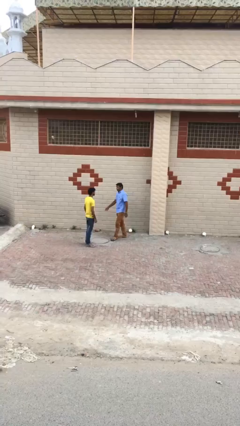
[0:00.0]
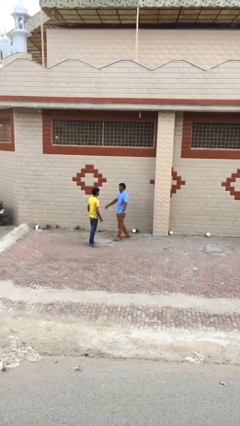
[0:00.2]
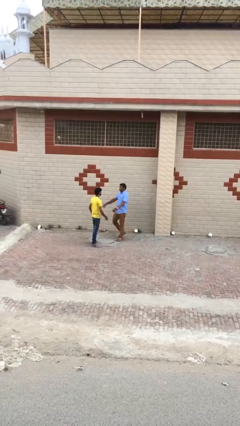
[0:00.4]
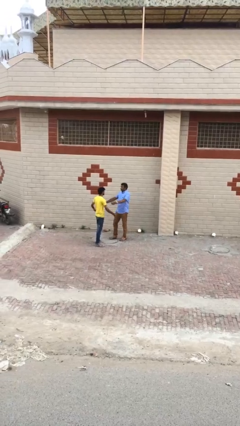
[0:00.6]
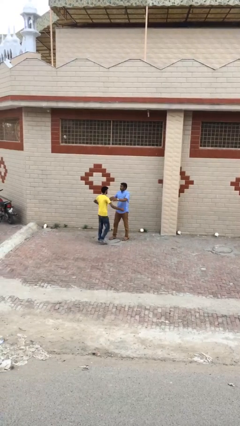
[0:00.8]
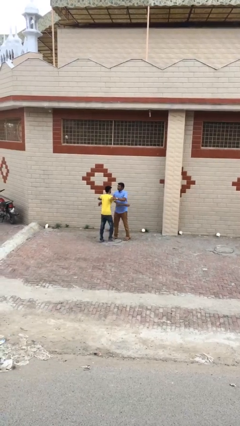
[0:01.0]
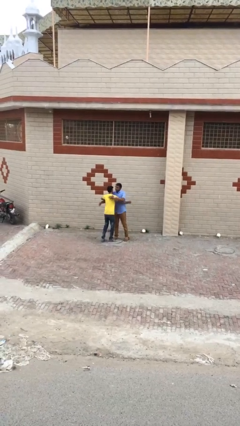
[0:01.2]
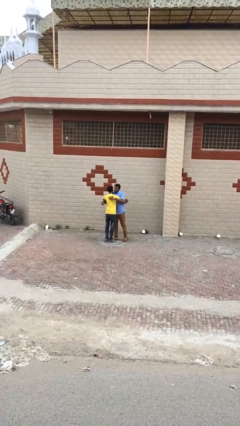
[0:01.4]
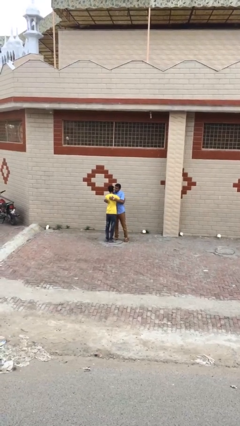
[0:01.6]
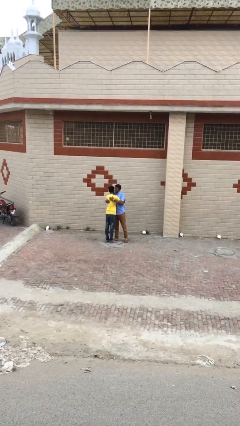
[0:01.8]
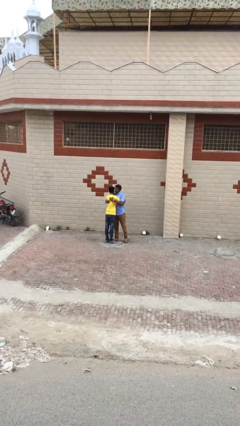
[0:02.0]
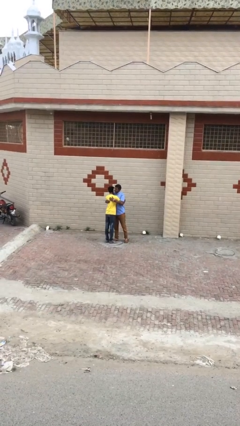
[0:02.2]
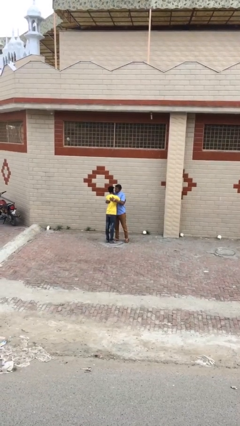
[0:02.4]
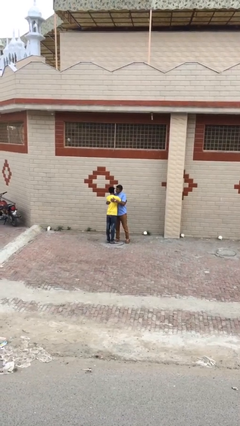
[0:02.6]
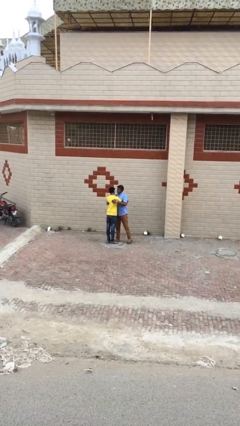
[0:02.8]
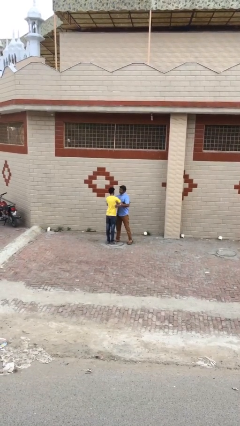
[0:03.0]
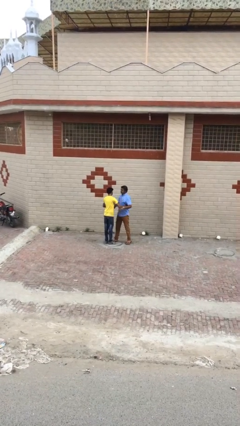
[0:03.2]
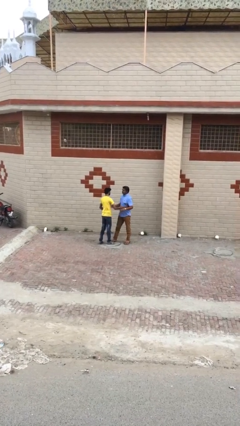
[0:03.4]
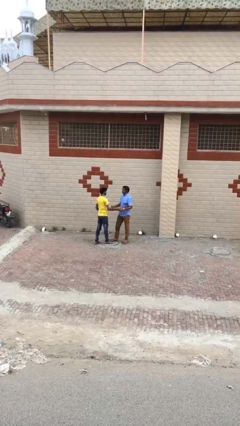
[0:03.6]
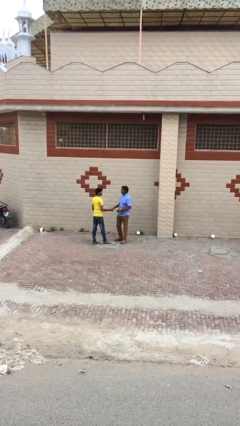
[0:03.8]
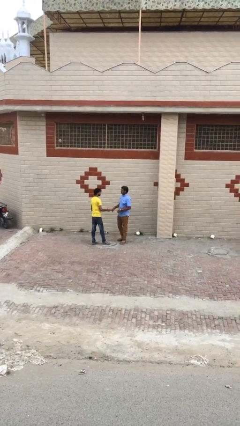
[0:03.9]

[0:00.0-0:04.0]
person embraces person

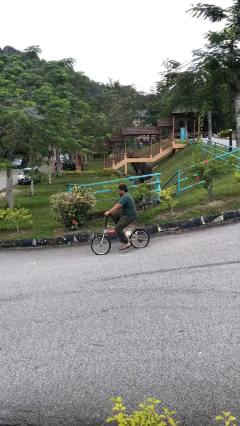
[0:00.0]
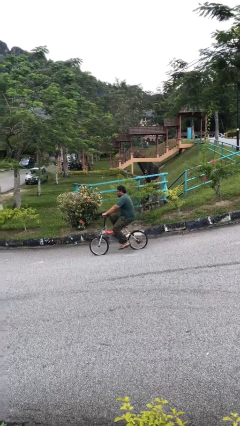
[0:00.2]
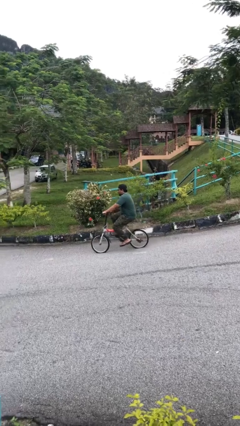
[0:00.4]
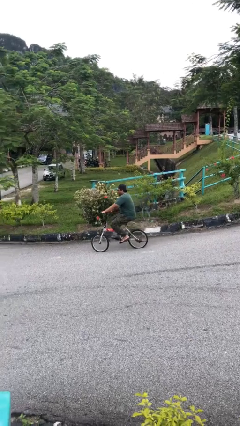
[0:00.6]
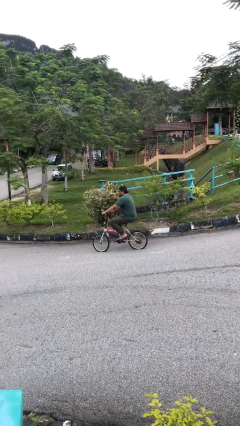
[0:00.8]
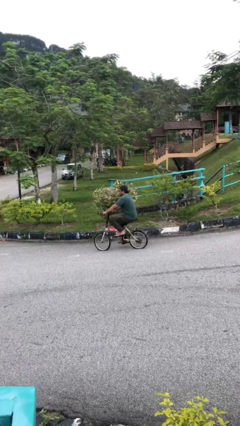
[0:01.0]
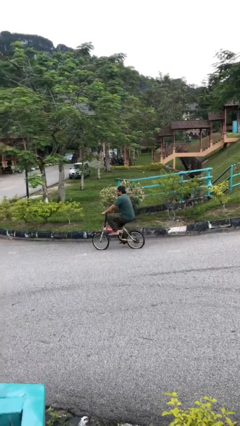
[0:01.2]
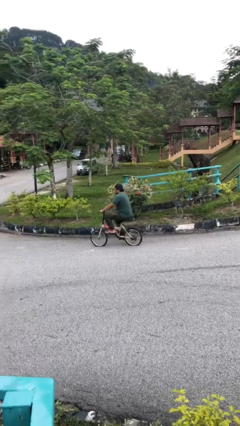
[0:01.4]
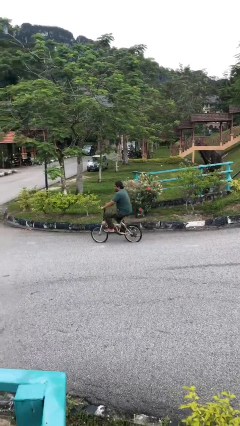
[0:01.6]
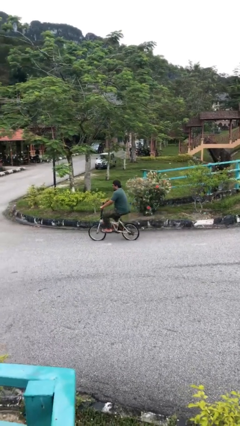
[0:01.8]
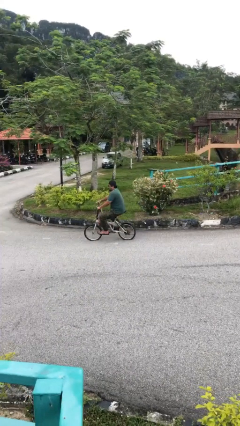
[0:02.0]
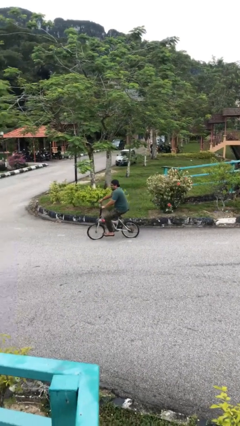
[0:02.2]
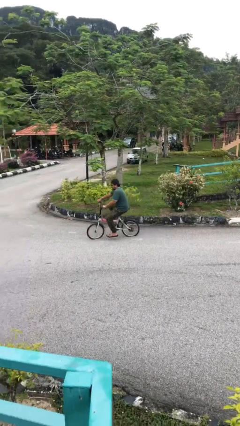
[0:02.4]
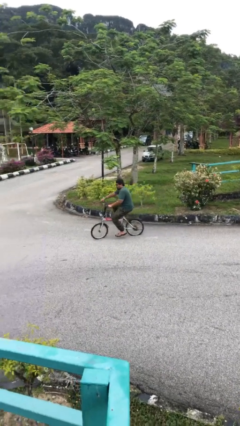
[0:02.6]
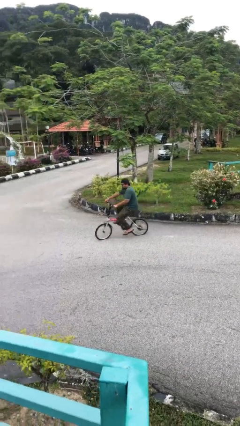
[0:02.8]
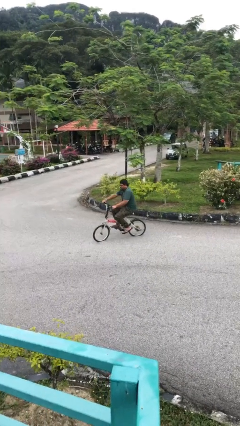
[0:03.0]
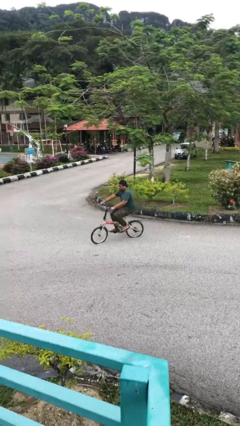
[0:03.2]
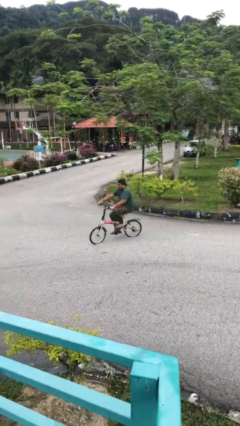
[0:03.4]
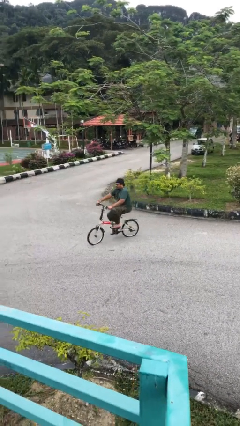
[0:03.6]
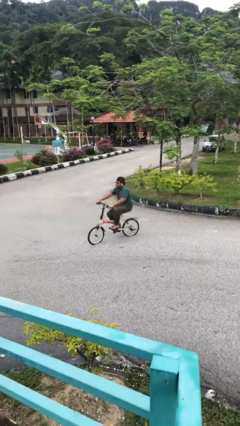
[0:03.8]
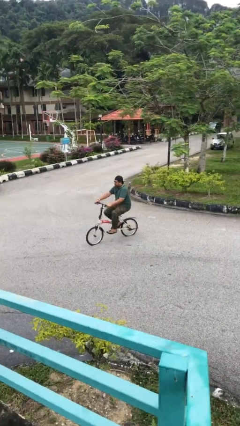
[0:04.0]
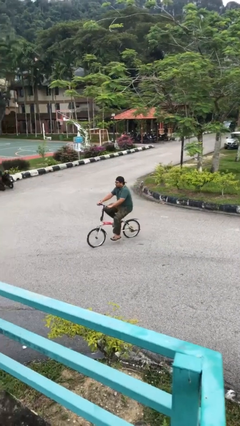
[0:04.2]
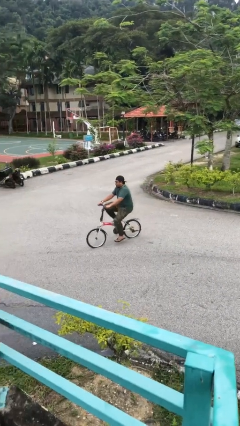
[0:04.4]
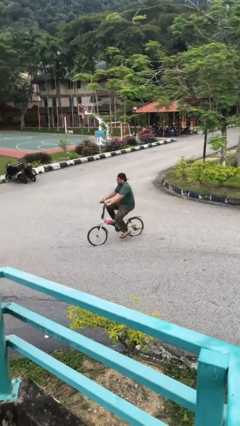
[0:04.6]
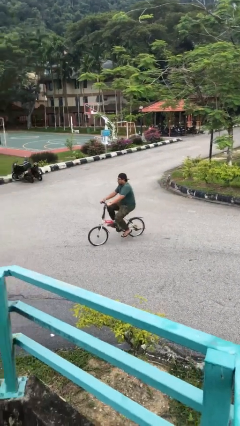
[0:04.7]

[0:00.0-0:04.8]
person rides bicycle

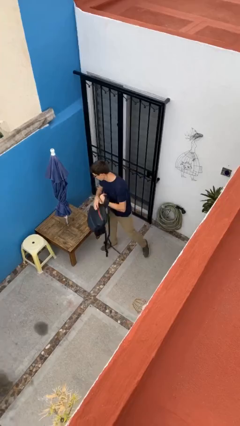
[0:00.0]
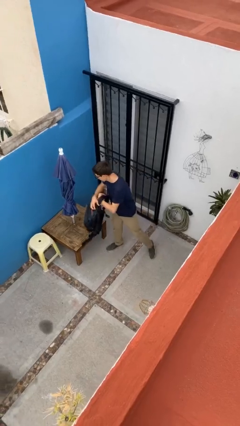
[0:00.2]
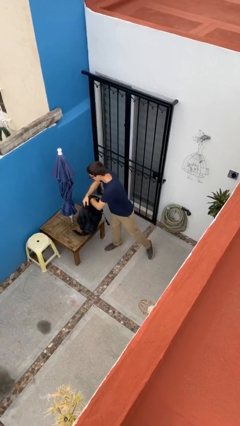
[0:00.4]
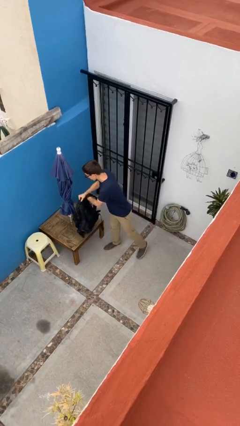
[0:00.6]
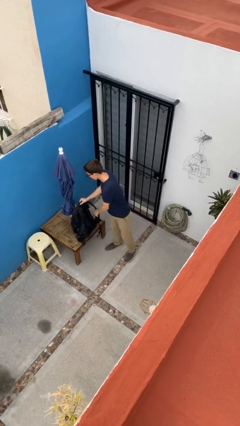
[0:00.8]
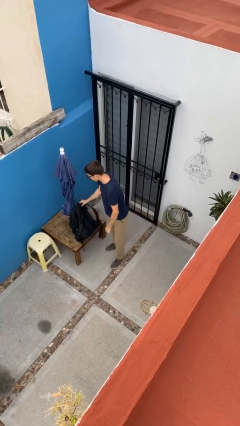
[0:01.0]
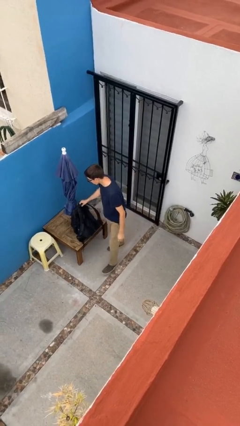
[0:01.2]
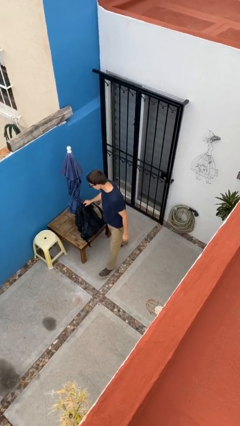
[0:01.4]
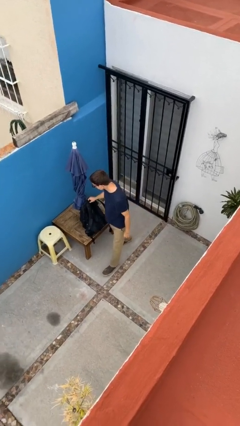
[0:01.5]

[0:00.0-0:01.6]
person puts down object on table

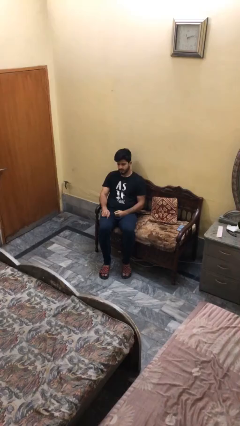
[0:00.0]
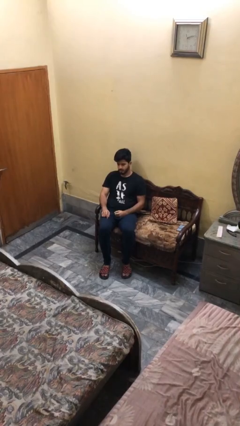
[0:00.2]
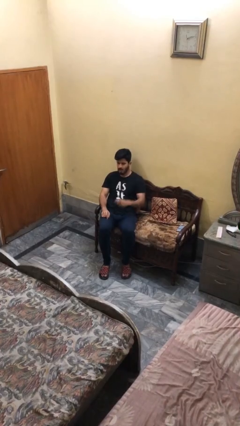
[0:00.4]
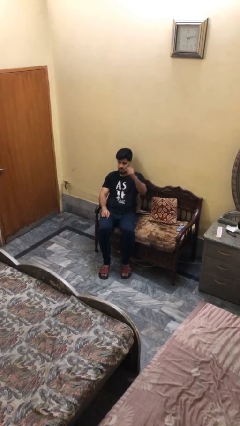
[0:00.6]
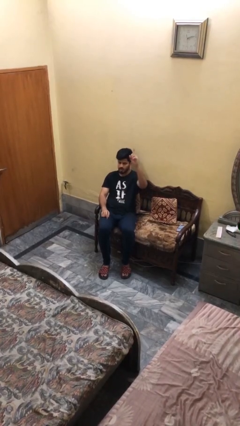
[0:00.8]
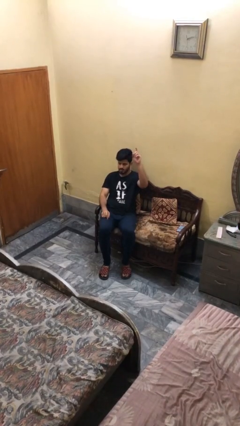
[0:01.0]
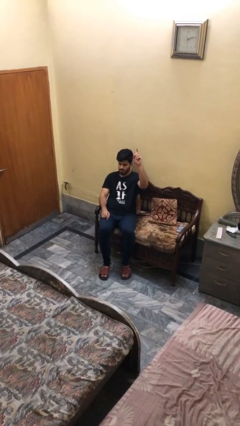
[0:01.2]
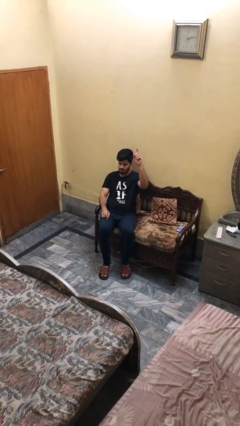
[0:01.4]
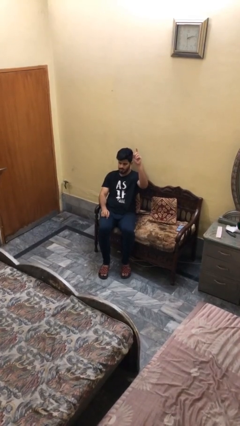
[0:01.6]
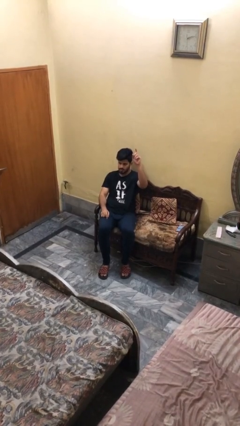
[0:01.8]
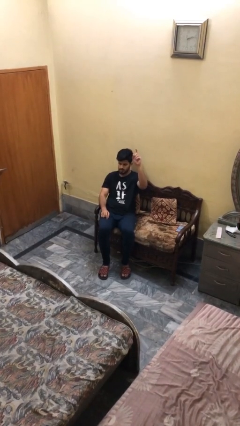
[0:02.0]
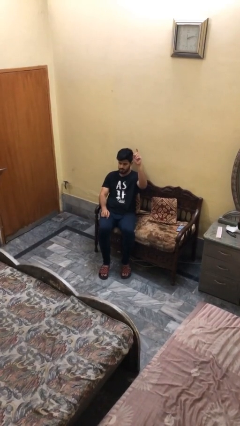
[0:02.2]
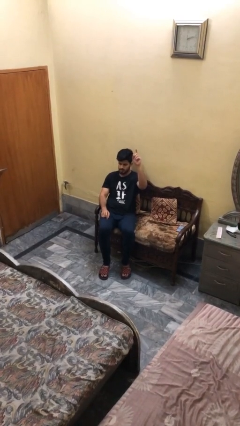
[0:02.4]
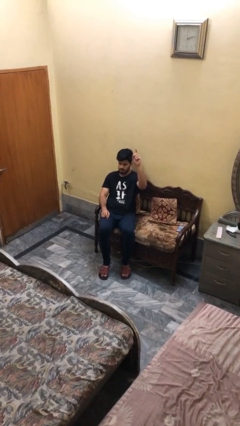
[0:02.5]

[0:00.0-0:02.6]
person gestures raise hand

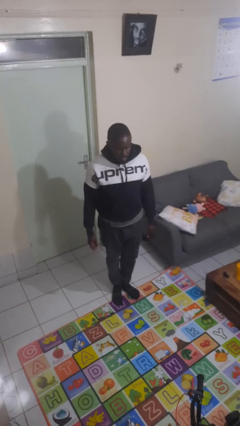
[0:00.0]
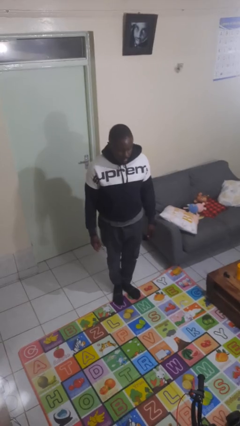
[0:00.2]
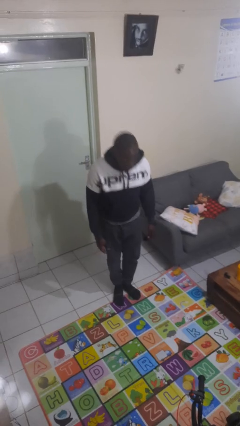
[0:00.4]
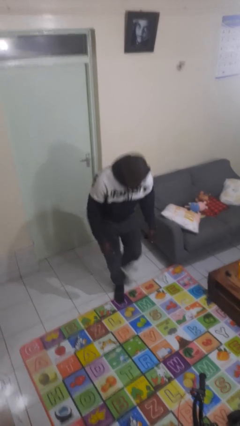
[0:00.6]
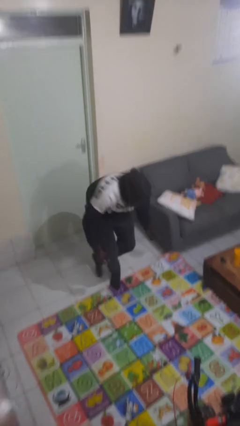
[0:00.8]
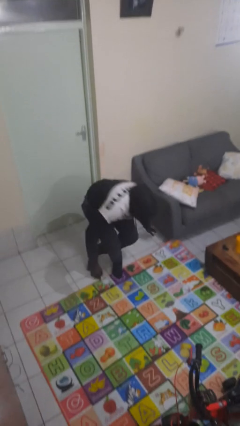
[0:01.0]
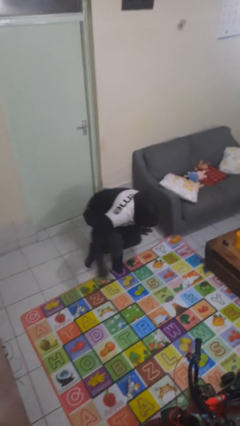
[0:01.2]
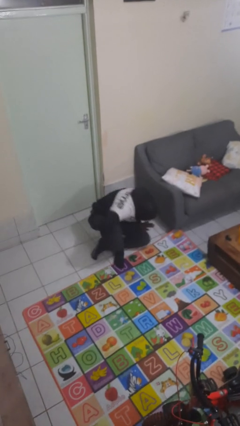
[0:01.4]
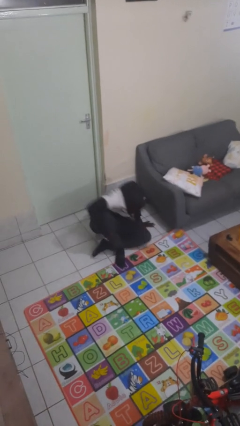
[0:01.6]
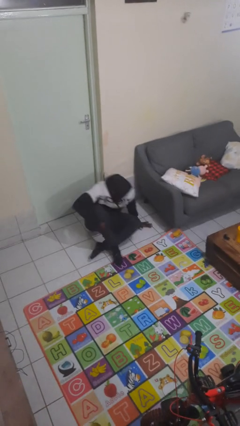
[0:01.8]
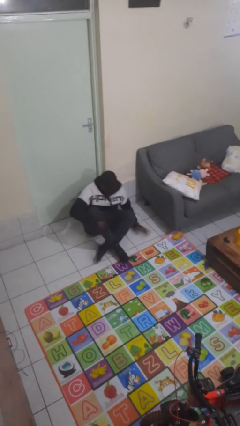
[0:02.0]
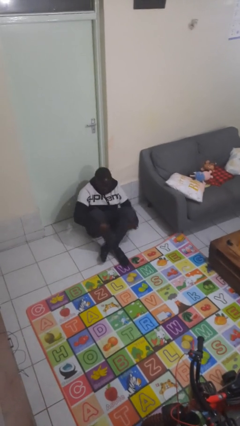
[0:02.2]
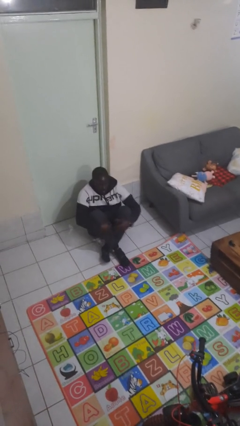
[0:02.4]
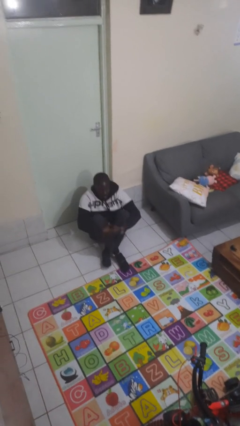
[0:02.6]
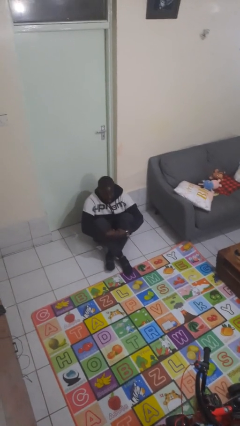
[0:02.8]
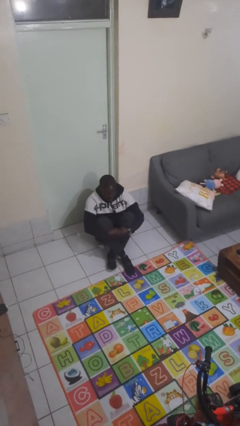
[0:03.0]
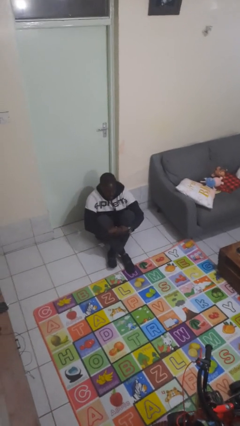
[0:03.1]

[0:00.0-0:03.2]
person sits crisscross

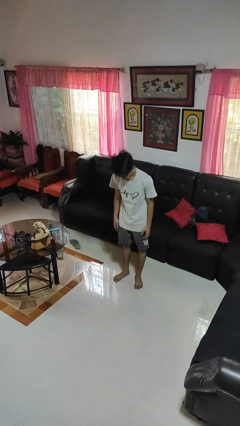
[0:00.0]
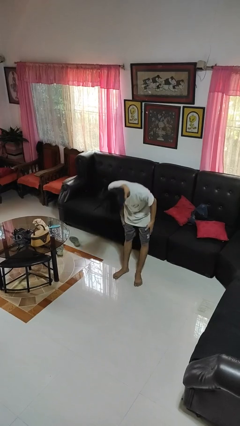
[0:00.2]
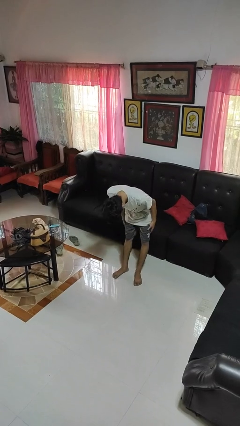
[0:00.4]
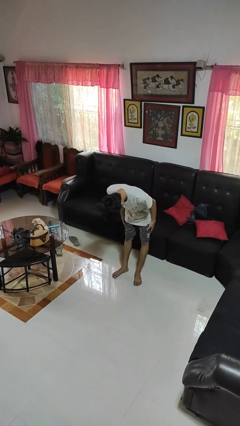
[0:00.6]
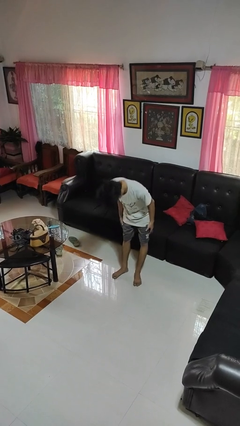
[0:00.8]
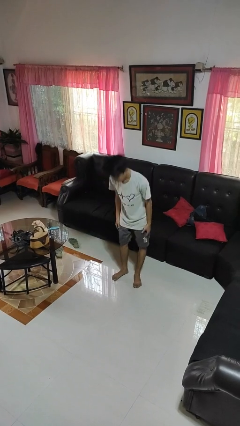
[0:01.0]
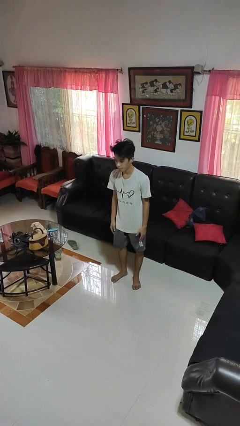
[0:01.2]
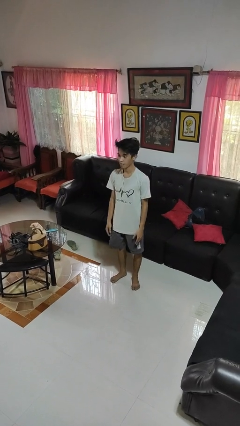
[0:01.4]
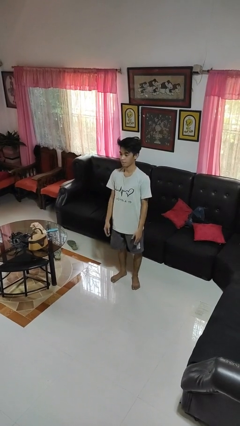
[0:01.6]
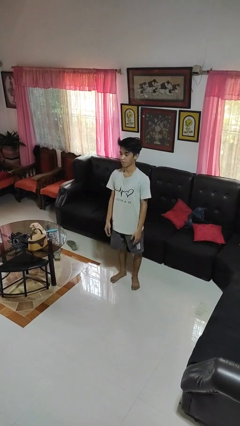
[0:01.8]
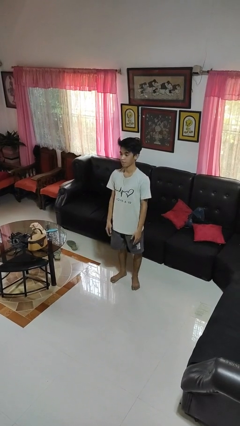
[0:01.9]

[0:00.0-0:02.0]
person bows
